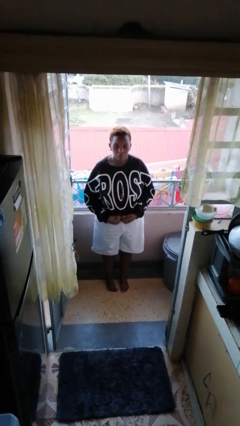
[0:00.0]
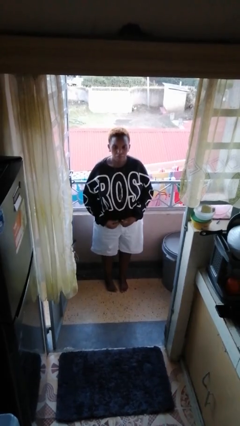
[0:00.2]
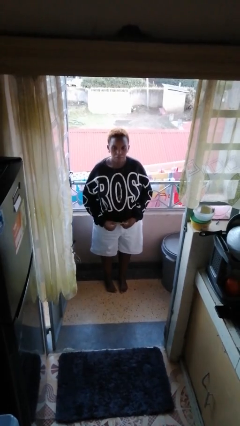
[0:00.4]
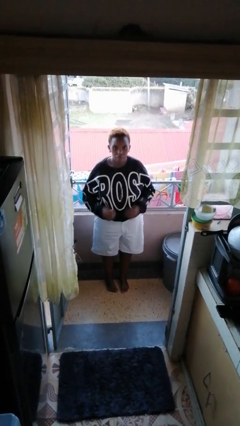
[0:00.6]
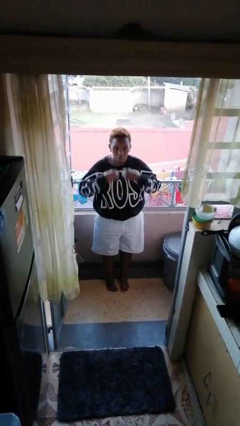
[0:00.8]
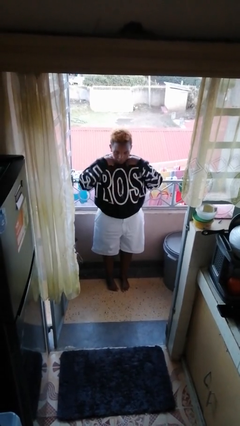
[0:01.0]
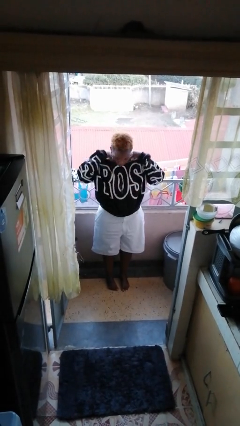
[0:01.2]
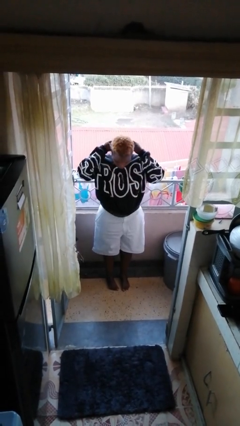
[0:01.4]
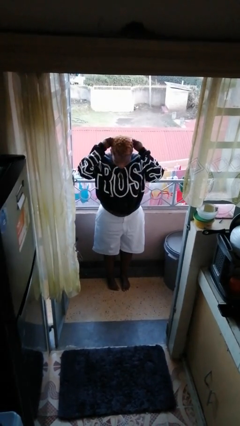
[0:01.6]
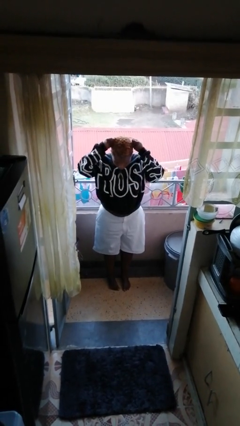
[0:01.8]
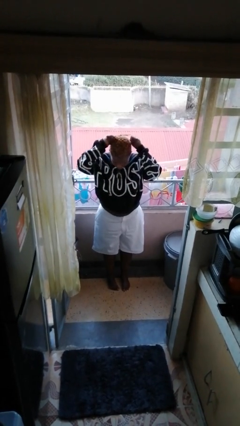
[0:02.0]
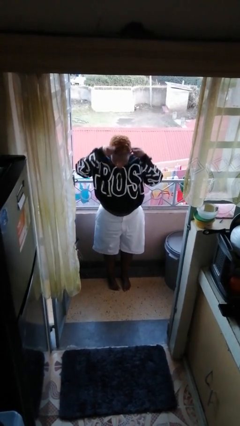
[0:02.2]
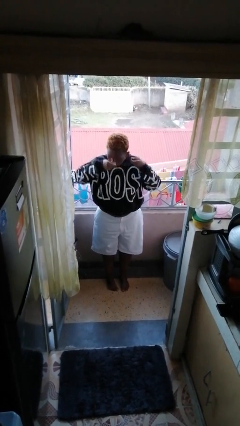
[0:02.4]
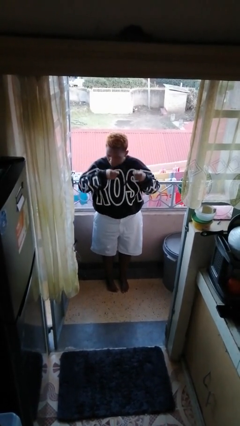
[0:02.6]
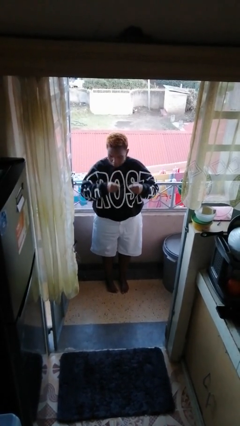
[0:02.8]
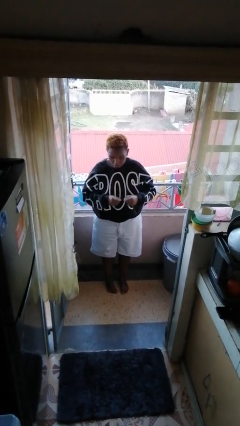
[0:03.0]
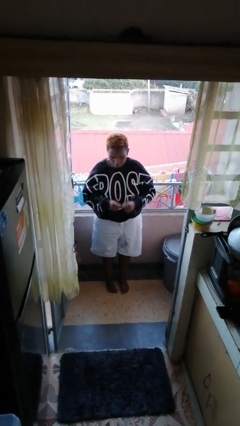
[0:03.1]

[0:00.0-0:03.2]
person takes off necklace

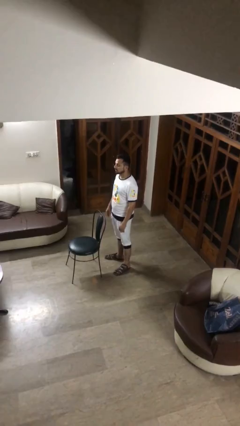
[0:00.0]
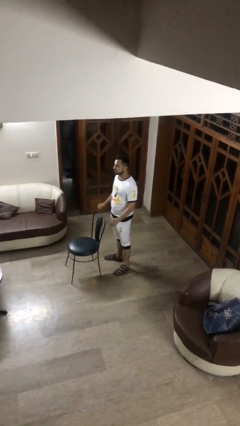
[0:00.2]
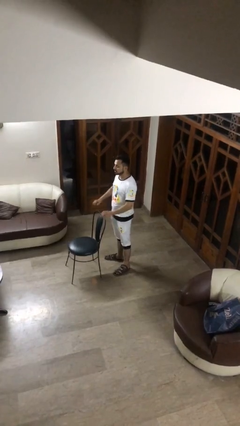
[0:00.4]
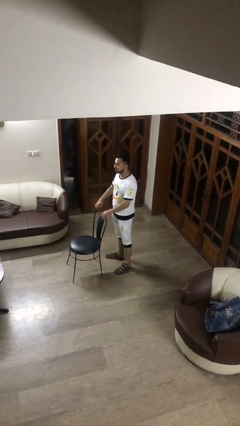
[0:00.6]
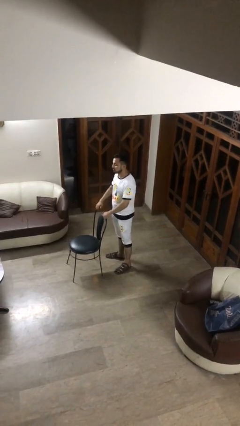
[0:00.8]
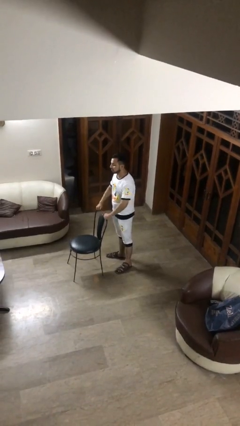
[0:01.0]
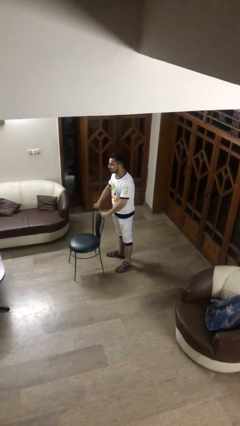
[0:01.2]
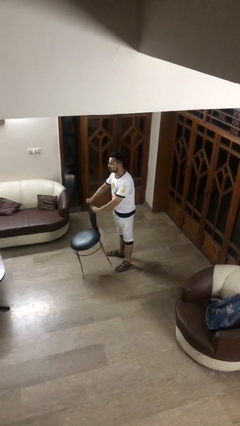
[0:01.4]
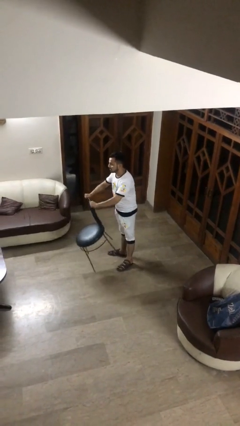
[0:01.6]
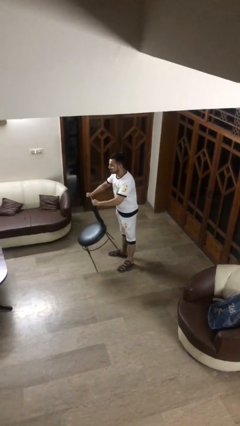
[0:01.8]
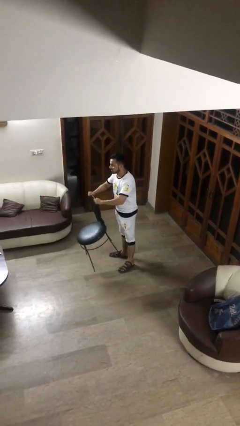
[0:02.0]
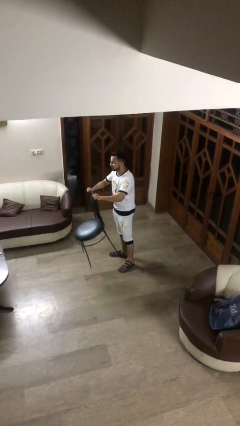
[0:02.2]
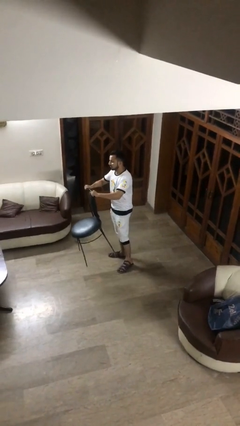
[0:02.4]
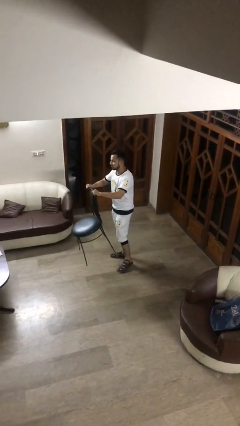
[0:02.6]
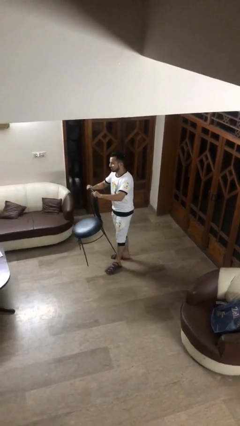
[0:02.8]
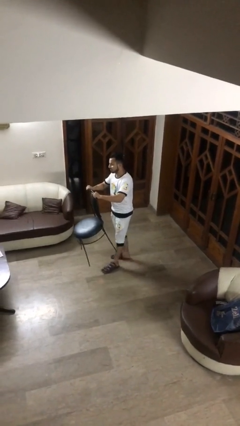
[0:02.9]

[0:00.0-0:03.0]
person picks up object from floor

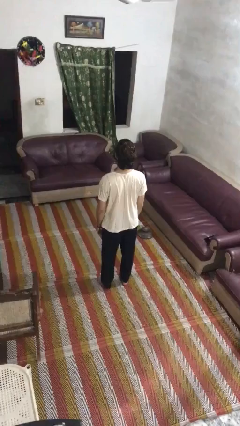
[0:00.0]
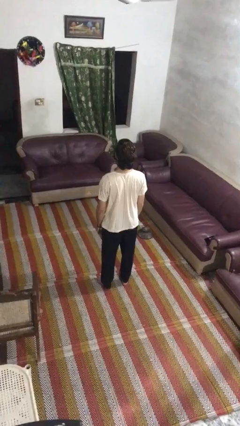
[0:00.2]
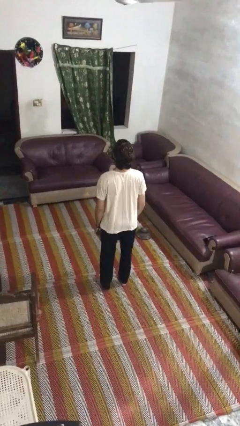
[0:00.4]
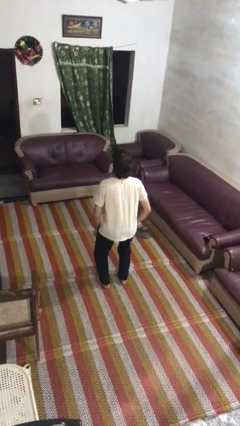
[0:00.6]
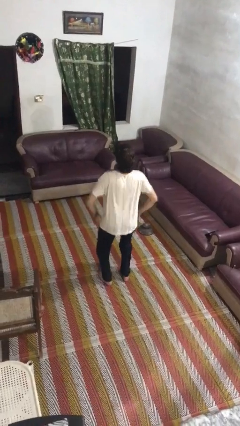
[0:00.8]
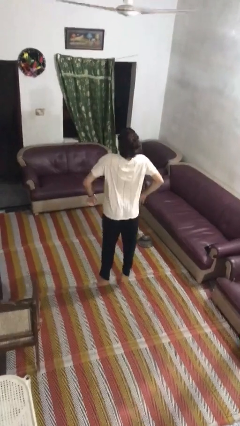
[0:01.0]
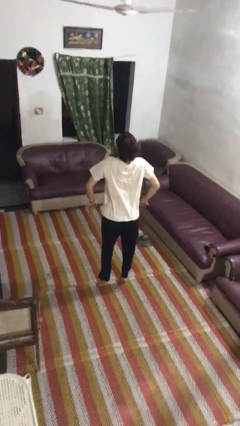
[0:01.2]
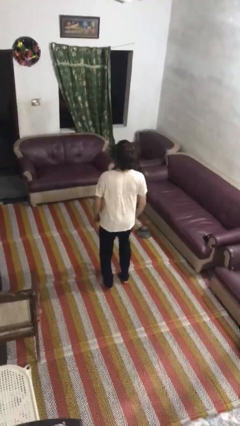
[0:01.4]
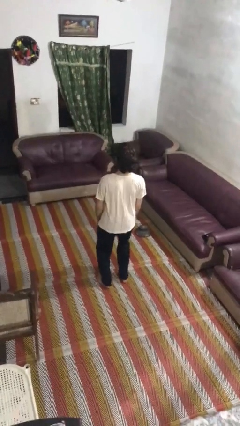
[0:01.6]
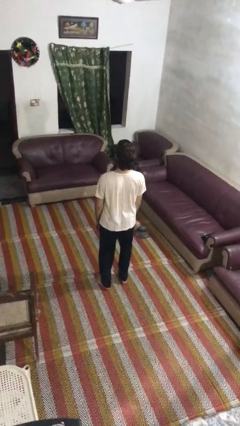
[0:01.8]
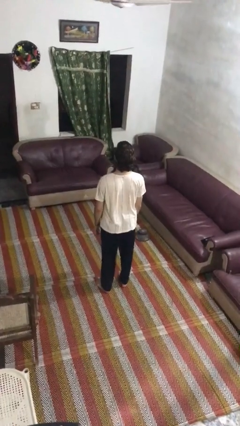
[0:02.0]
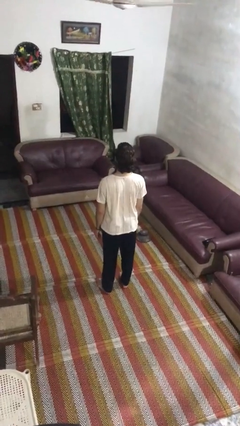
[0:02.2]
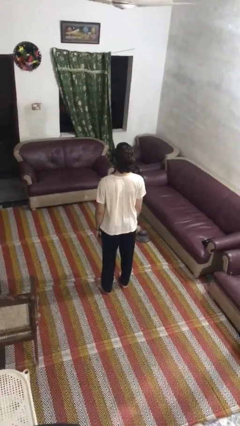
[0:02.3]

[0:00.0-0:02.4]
person jumps

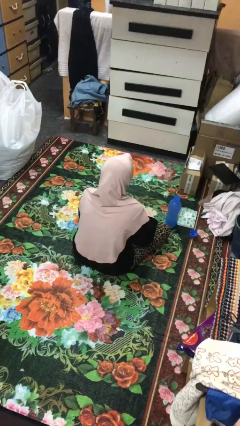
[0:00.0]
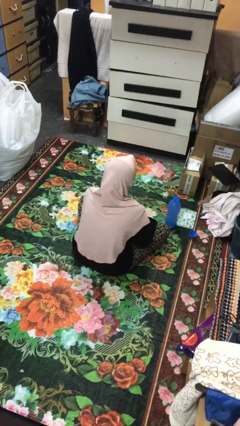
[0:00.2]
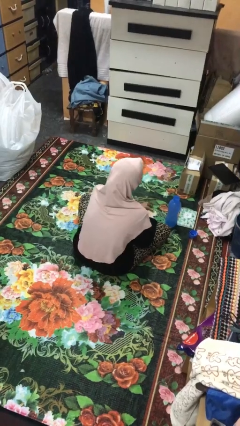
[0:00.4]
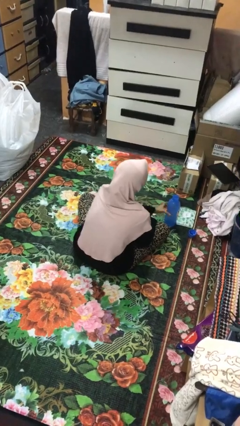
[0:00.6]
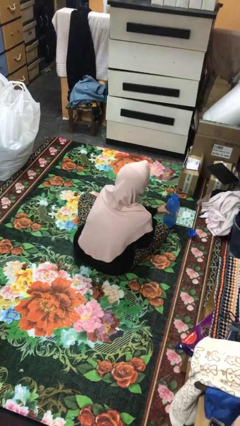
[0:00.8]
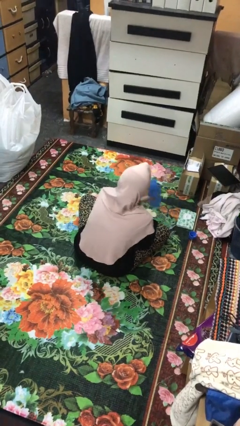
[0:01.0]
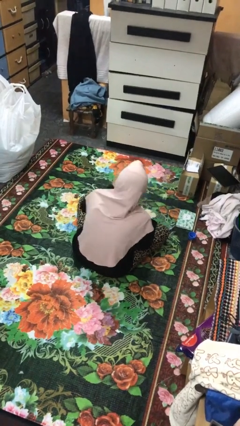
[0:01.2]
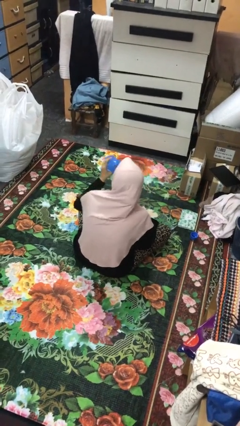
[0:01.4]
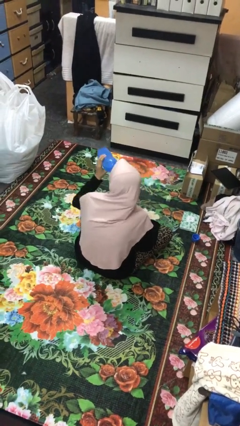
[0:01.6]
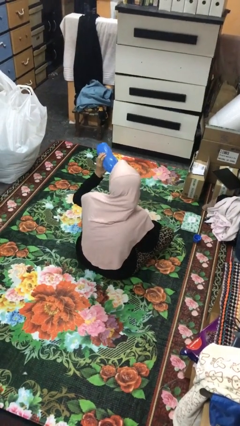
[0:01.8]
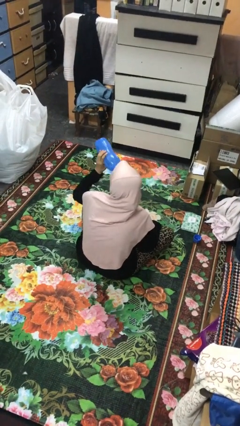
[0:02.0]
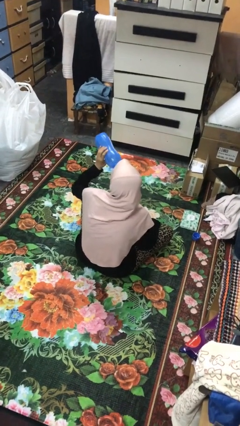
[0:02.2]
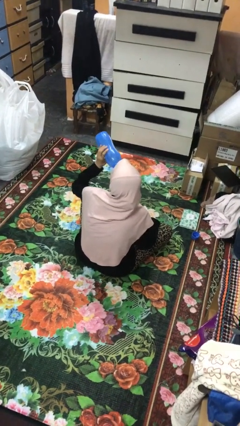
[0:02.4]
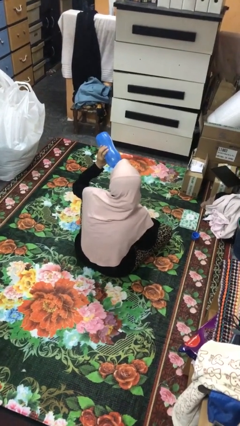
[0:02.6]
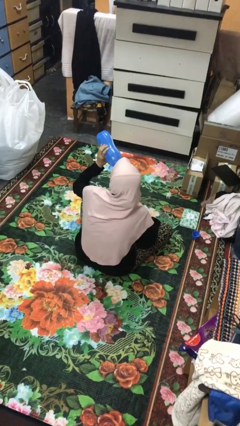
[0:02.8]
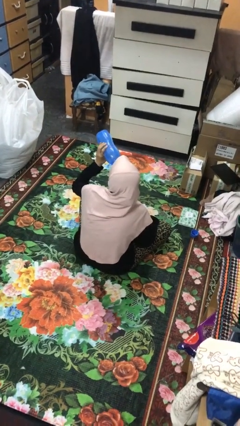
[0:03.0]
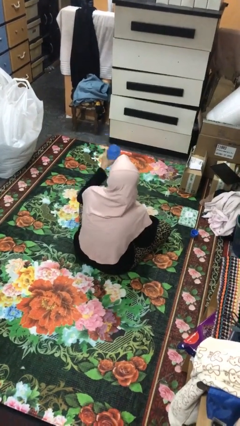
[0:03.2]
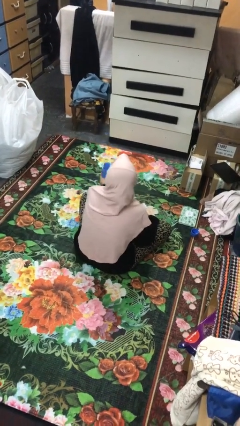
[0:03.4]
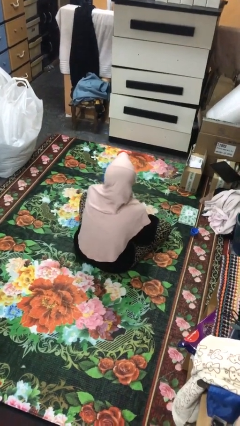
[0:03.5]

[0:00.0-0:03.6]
person drinks from bottle

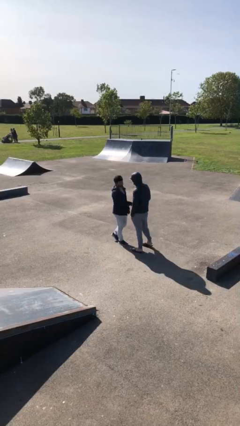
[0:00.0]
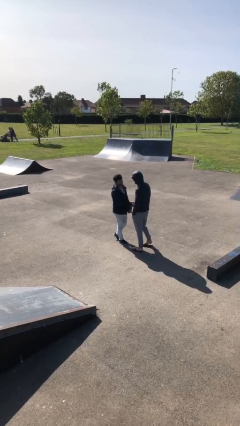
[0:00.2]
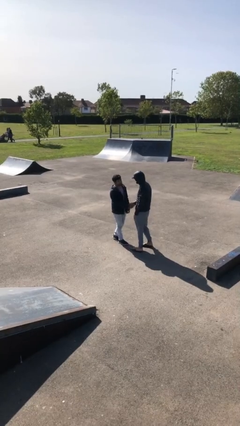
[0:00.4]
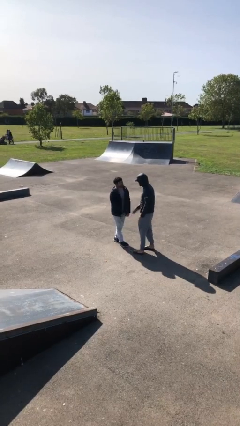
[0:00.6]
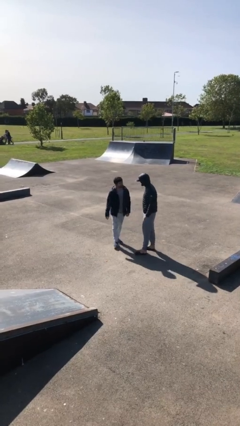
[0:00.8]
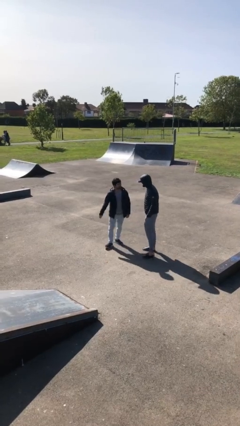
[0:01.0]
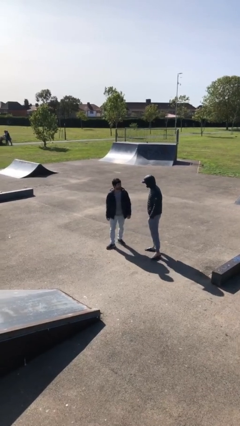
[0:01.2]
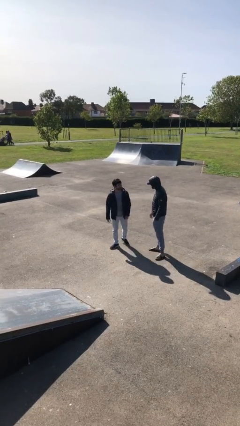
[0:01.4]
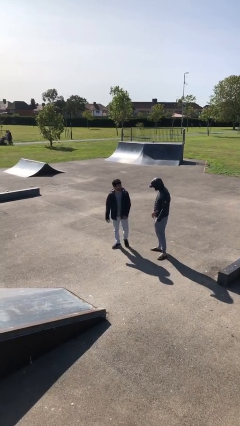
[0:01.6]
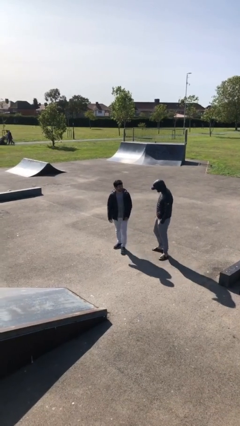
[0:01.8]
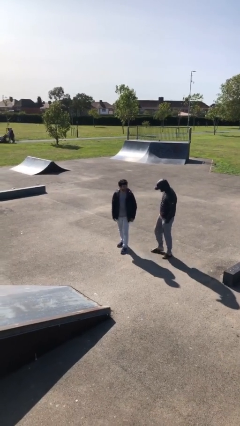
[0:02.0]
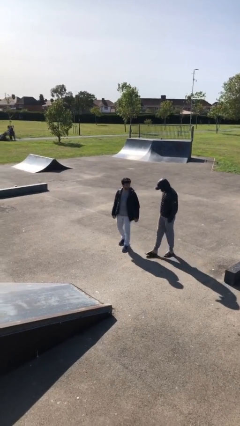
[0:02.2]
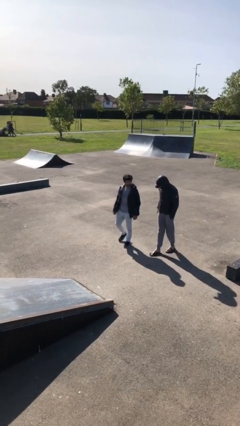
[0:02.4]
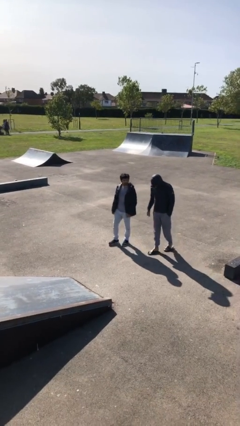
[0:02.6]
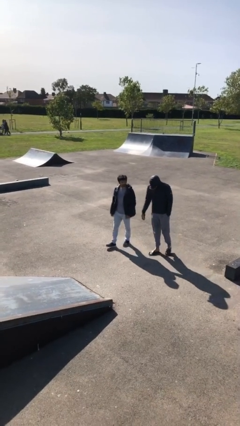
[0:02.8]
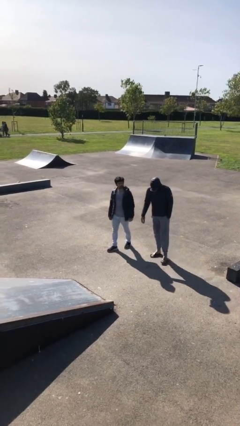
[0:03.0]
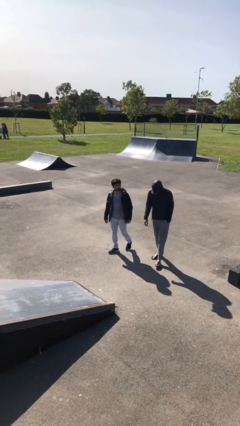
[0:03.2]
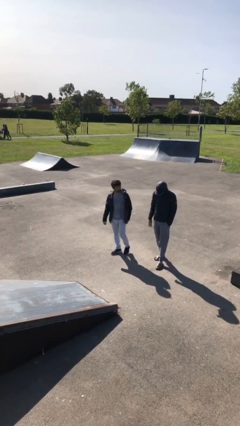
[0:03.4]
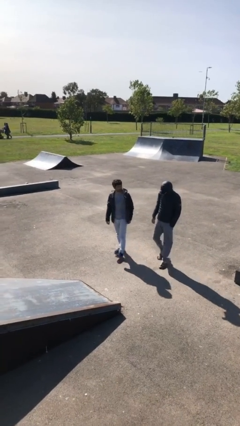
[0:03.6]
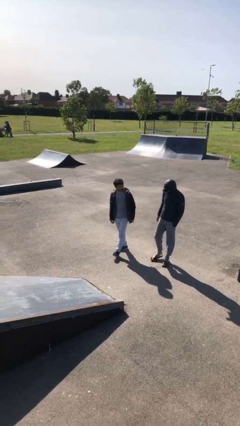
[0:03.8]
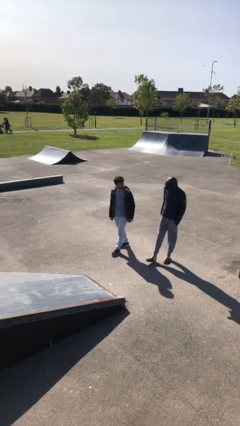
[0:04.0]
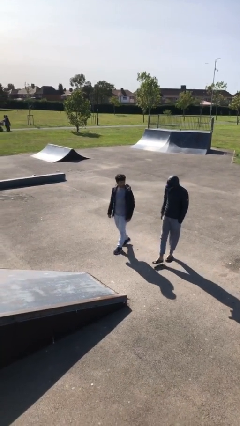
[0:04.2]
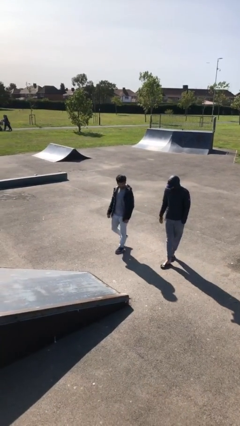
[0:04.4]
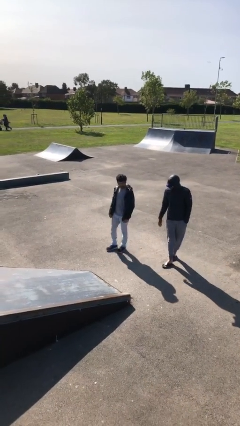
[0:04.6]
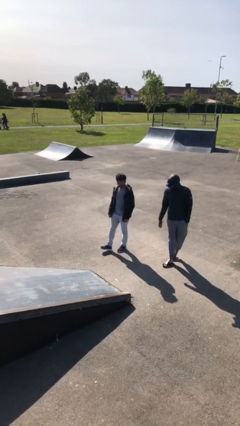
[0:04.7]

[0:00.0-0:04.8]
person talks to person

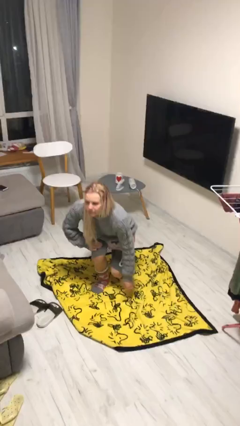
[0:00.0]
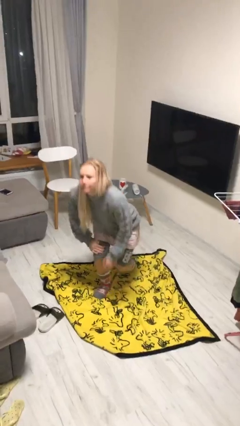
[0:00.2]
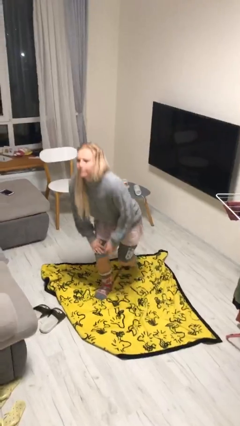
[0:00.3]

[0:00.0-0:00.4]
person stands up
